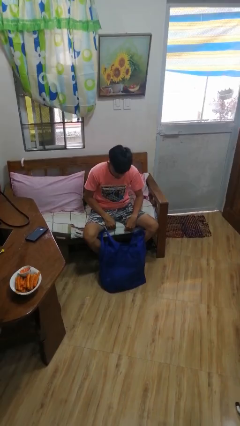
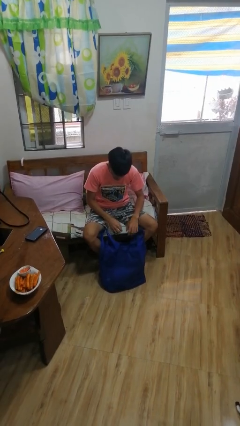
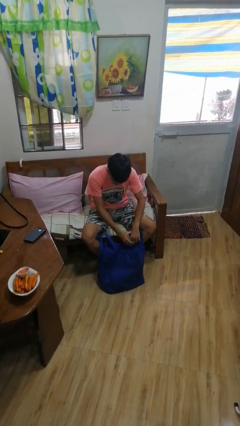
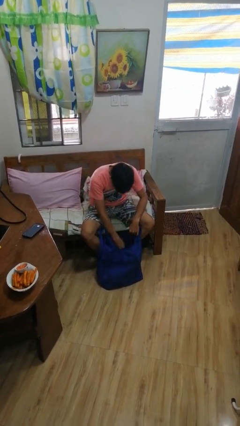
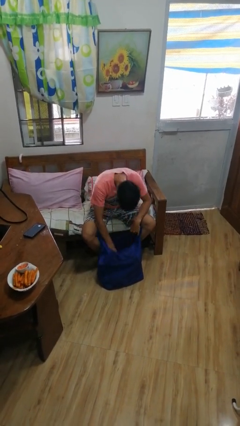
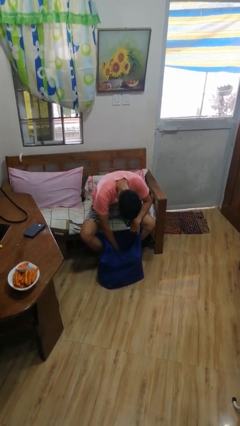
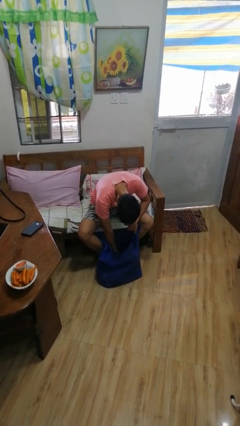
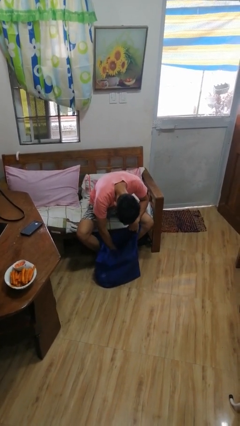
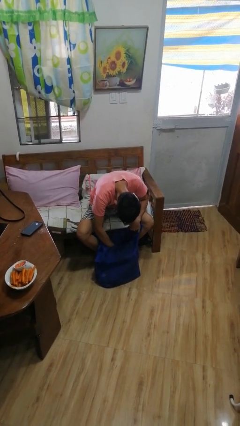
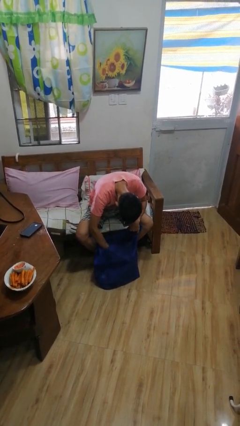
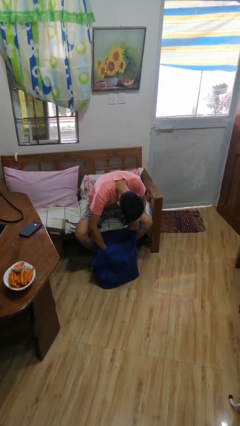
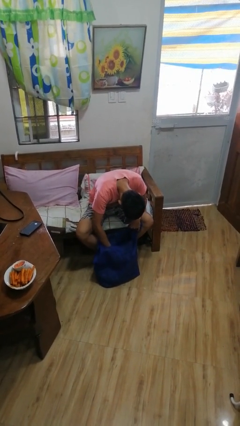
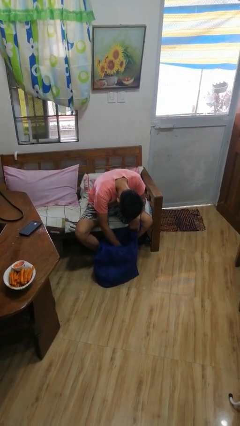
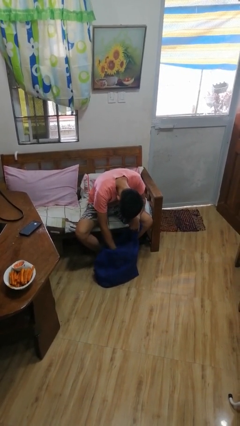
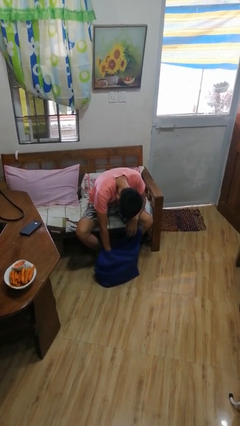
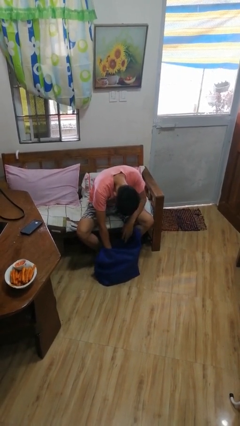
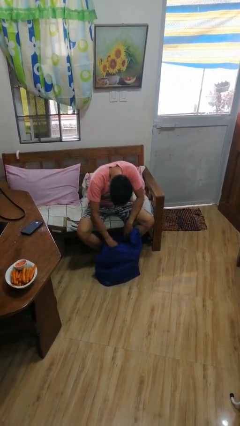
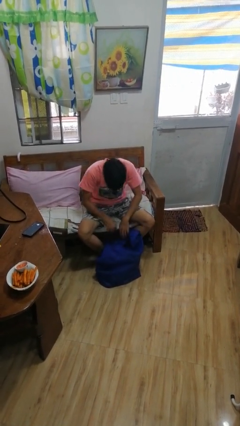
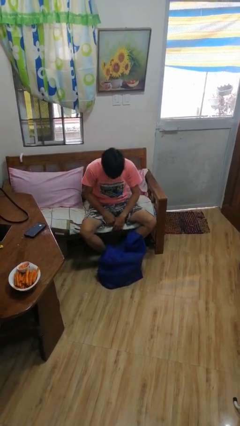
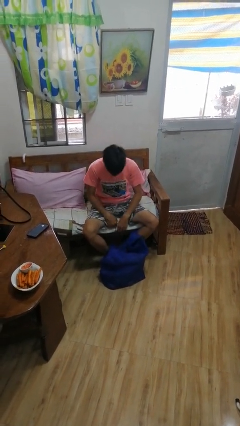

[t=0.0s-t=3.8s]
person searches in bag

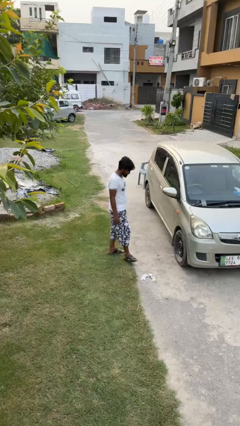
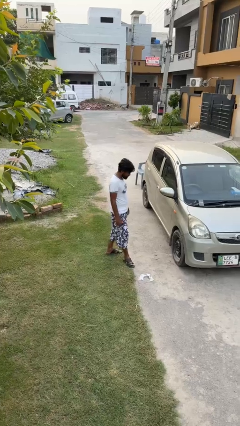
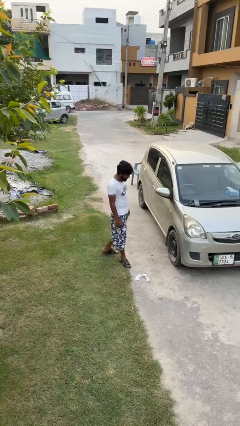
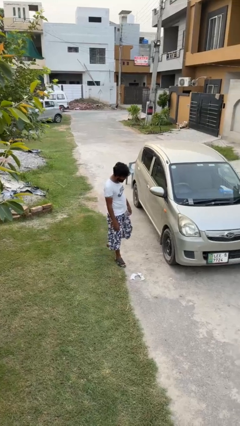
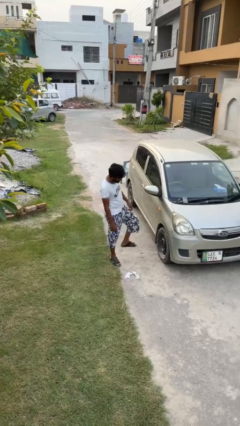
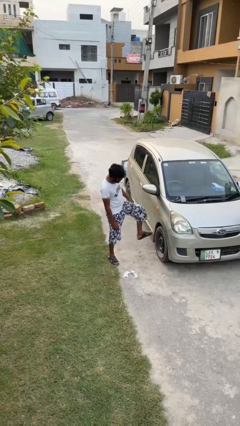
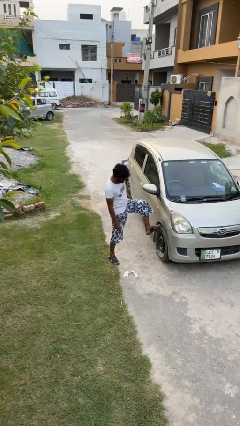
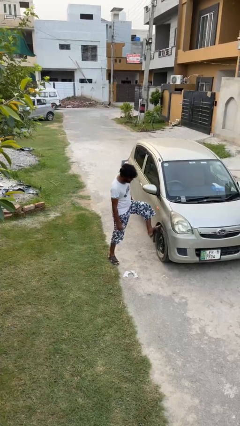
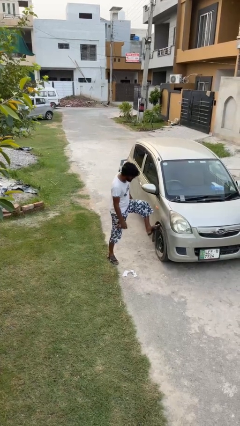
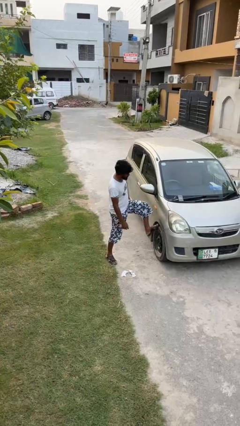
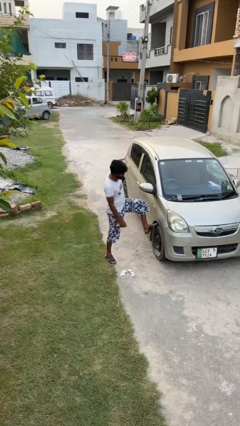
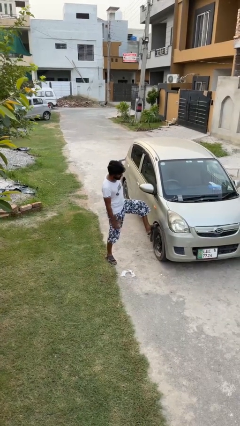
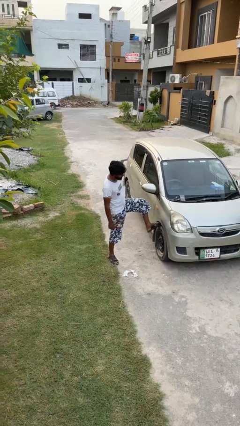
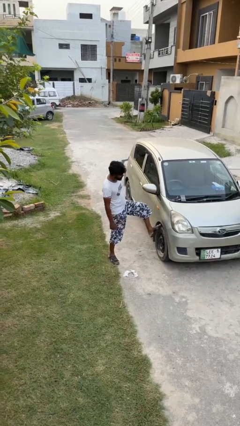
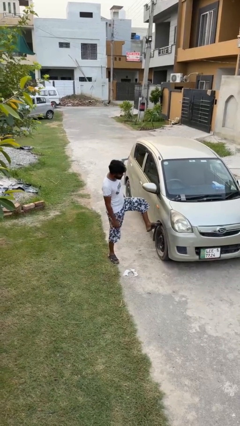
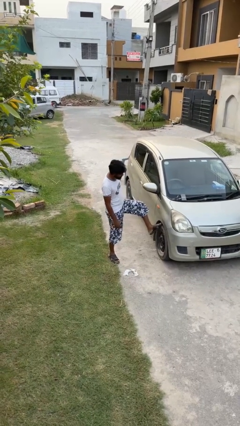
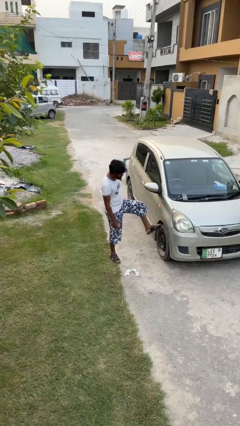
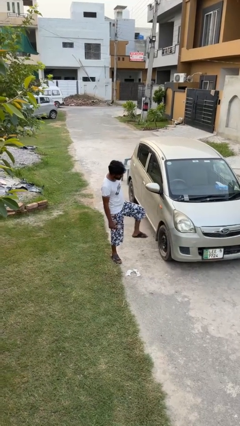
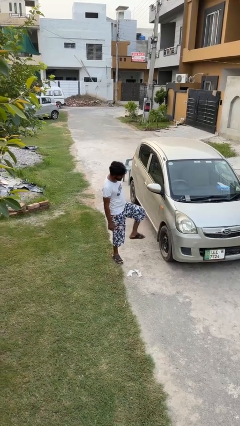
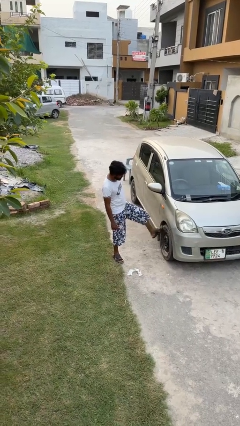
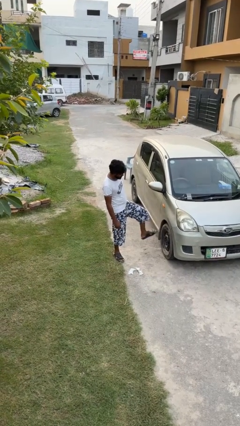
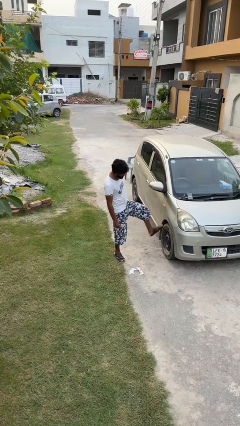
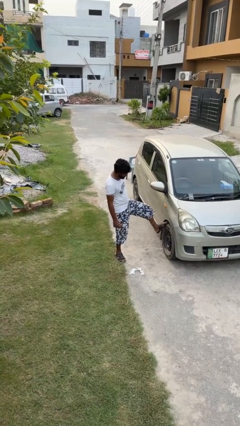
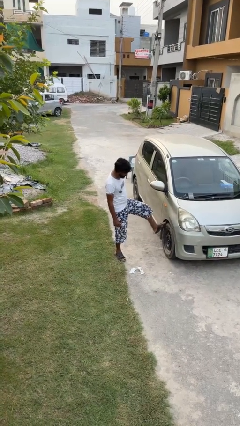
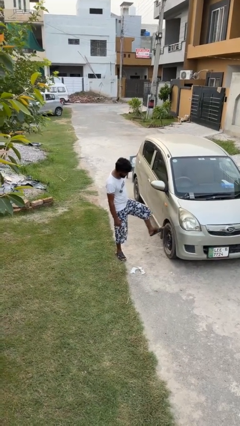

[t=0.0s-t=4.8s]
person kicks car tires

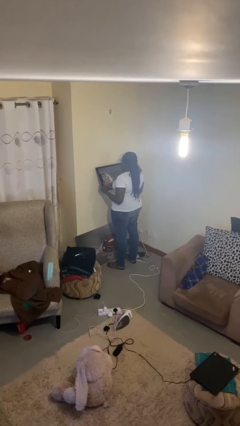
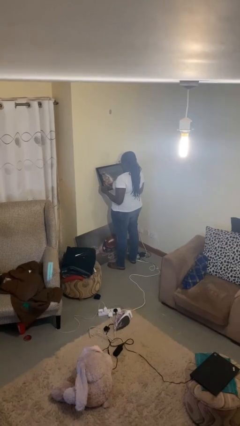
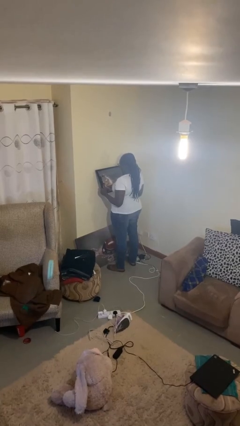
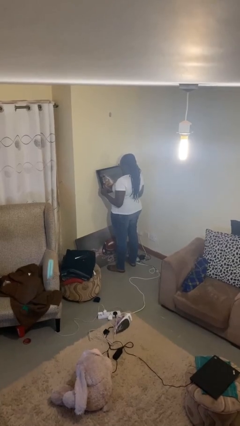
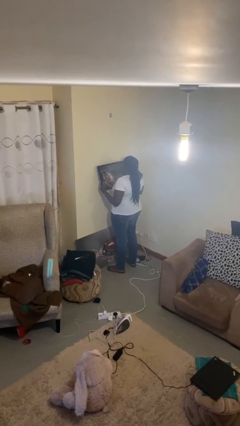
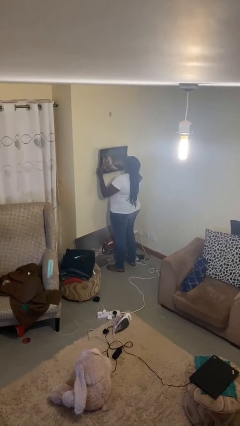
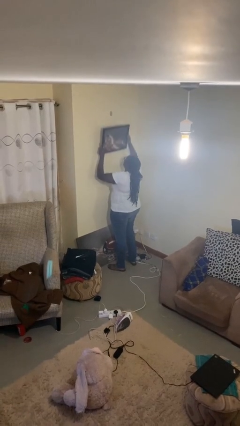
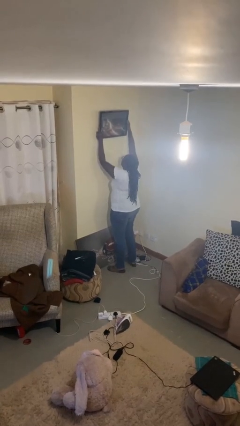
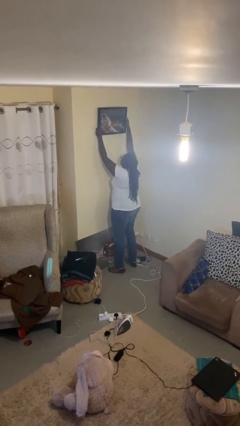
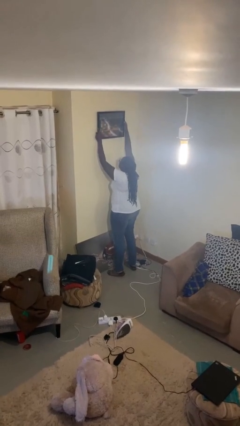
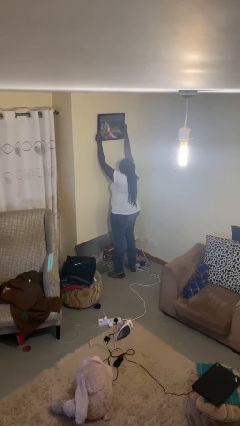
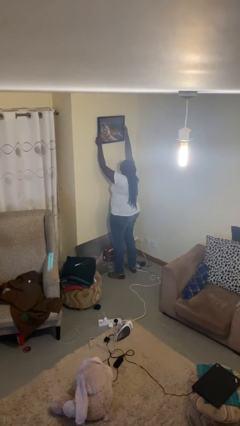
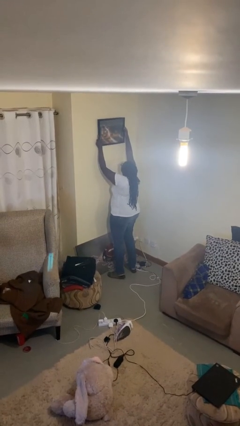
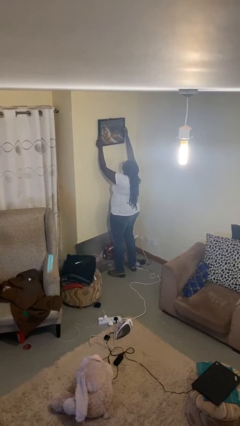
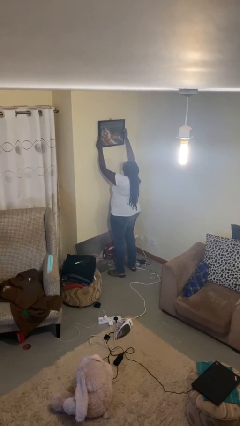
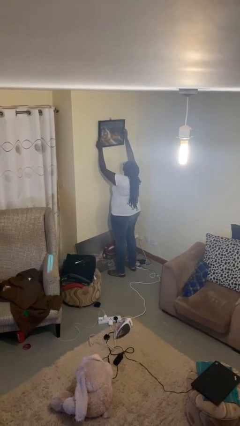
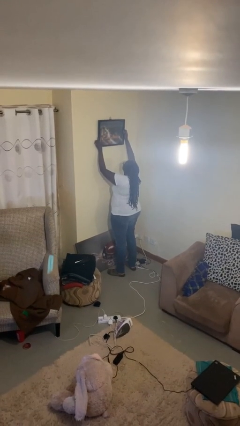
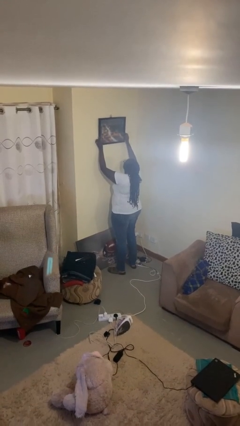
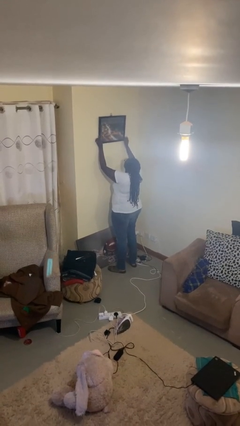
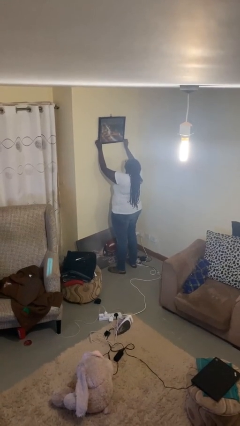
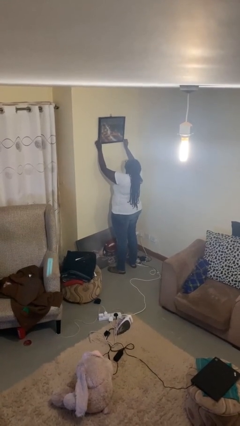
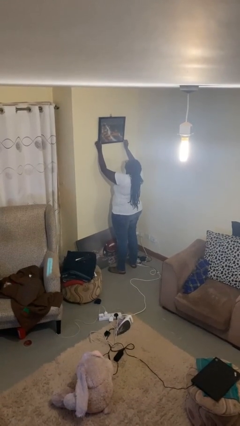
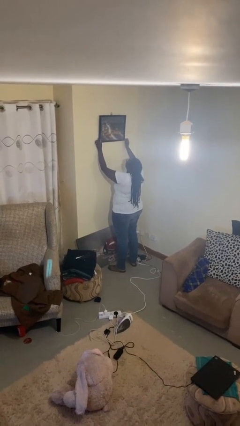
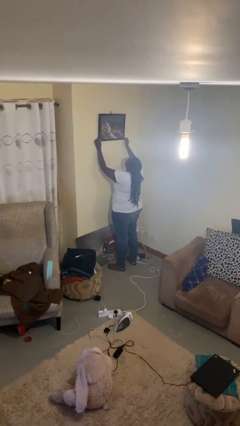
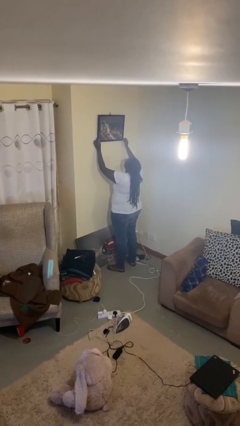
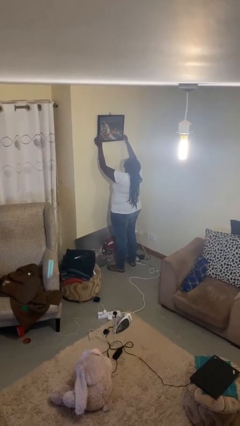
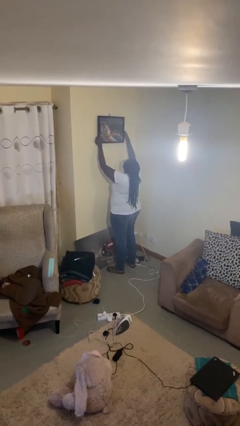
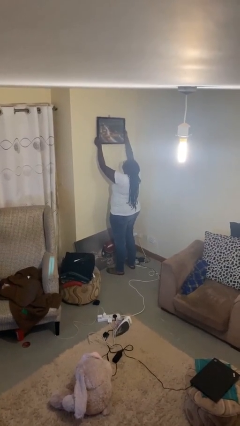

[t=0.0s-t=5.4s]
person puts up picture frame

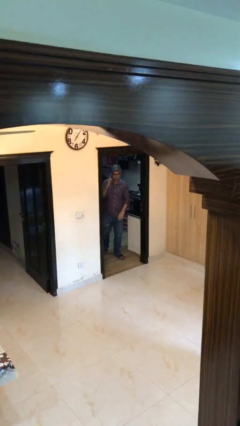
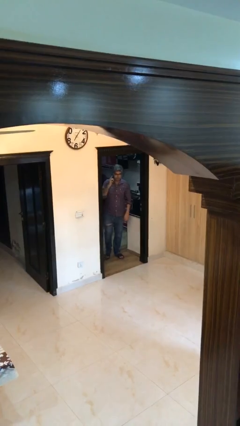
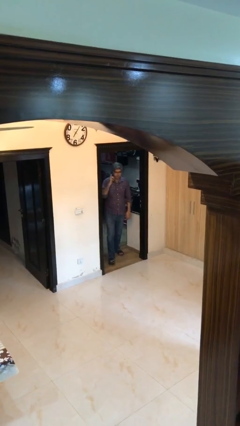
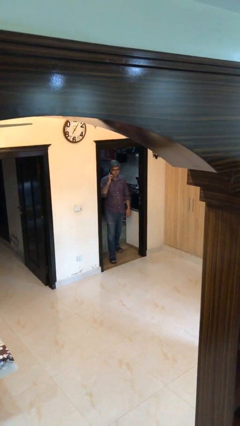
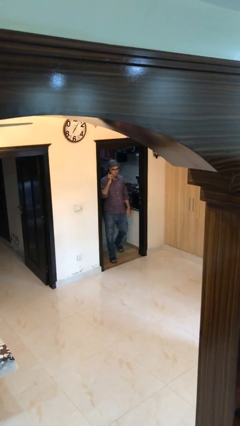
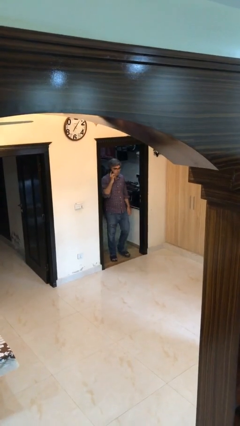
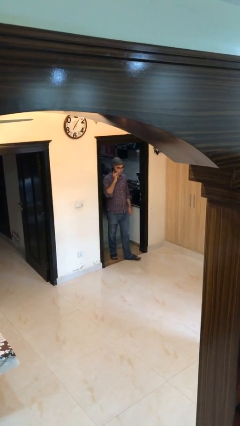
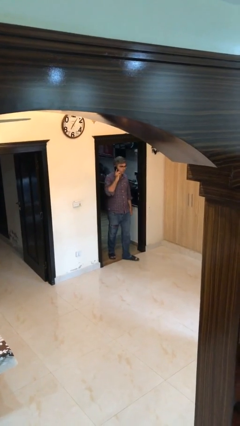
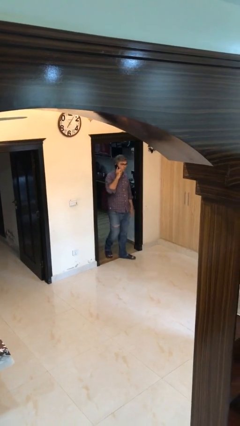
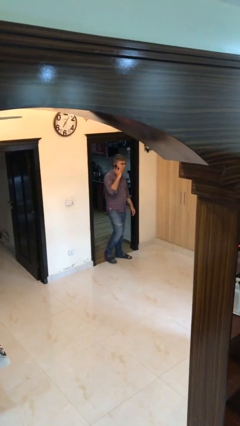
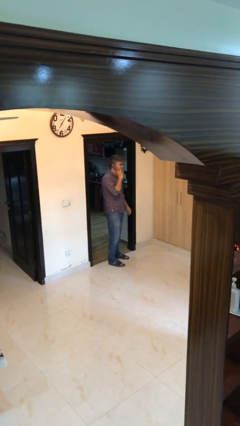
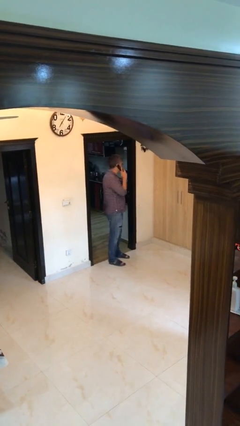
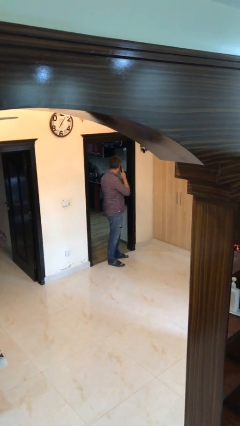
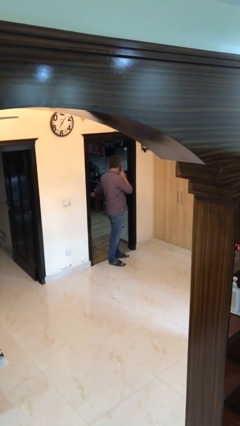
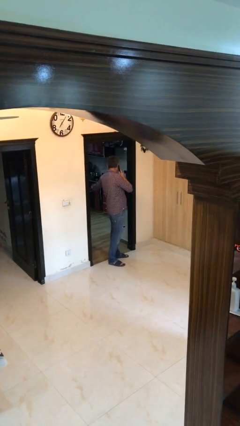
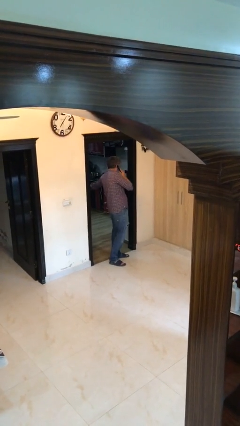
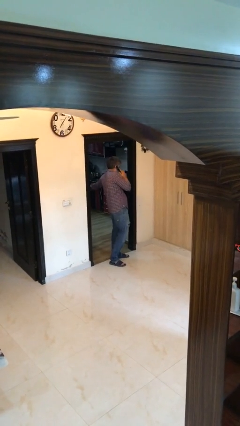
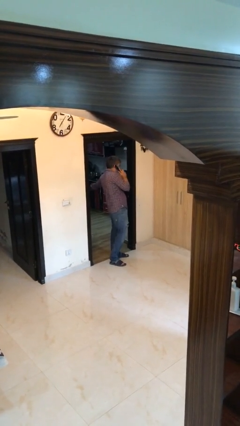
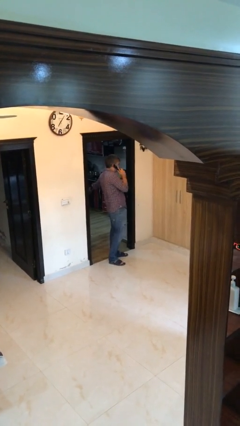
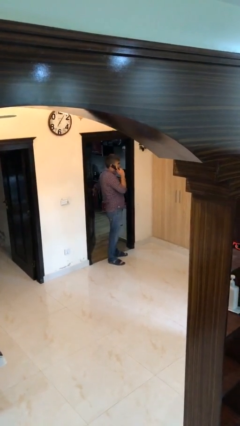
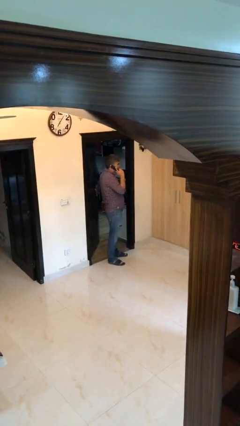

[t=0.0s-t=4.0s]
person enters scene through structure
